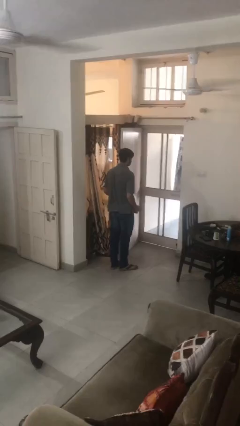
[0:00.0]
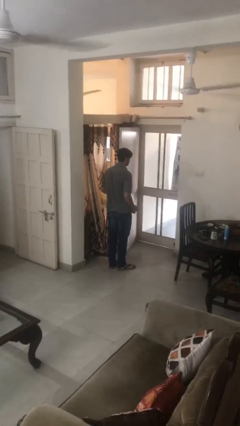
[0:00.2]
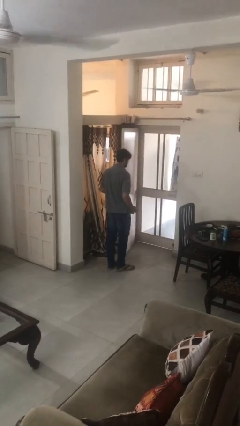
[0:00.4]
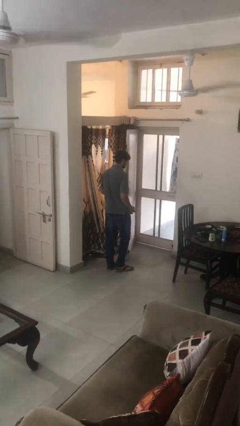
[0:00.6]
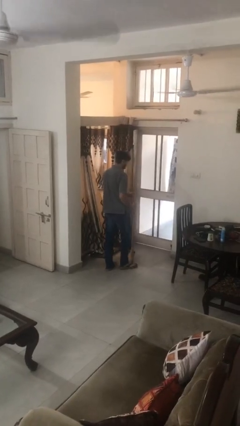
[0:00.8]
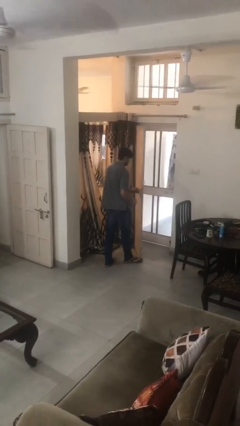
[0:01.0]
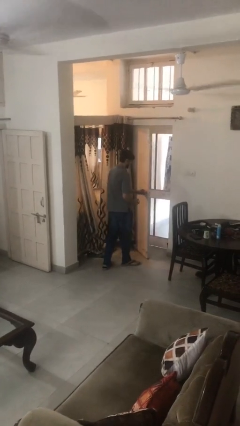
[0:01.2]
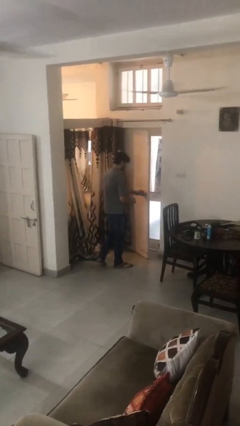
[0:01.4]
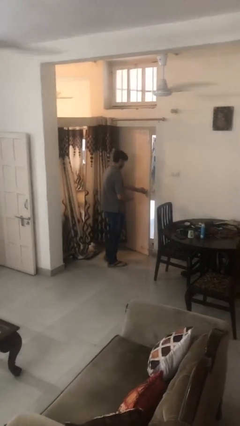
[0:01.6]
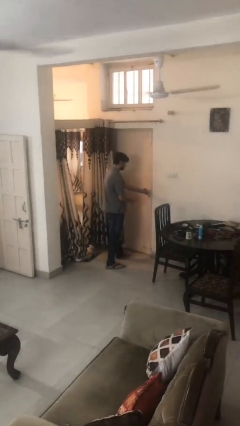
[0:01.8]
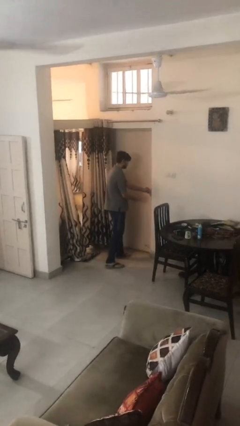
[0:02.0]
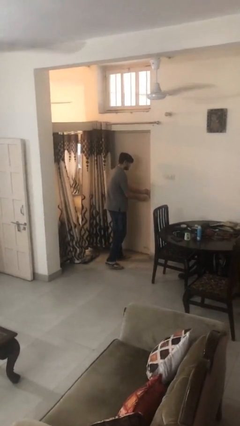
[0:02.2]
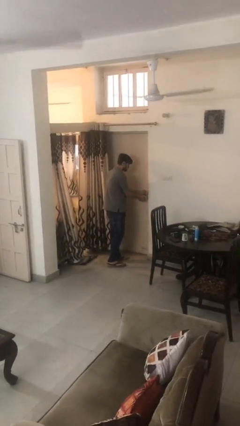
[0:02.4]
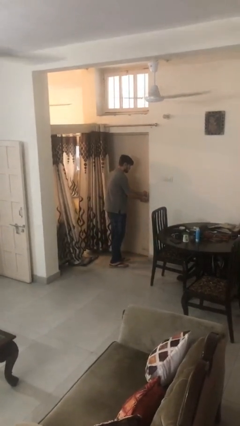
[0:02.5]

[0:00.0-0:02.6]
person closes facility door

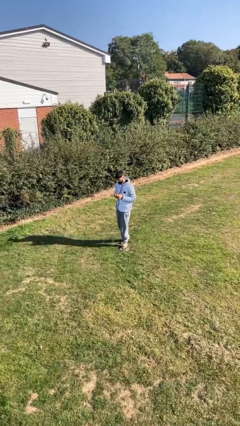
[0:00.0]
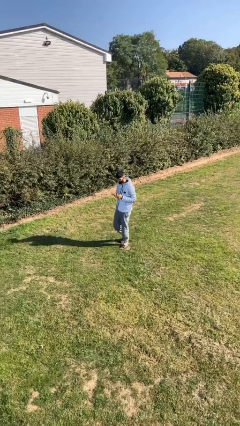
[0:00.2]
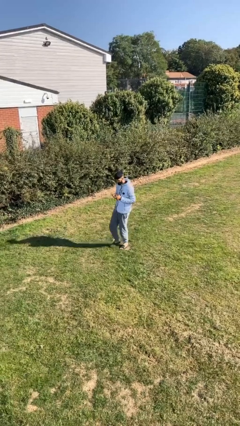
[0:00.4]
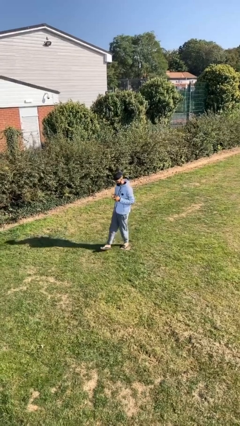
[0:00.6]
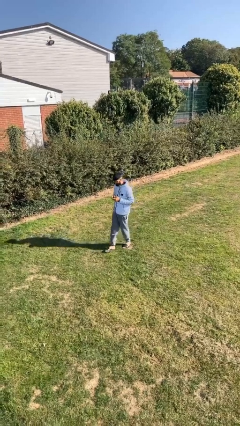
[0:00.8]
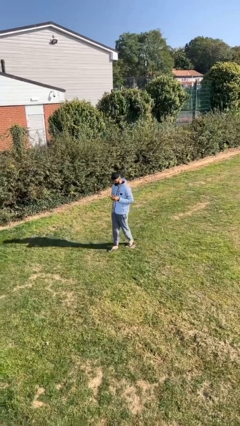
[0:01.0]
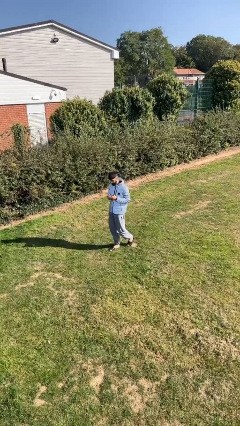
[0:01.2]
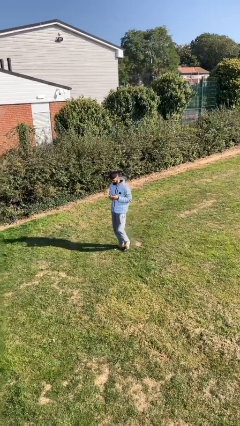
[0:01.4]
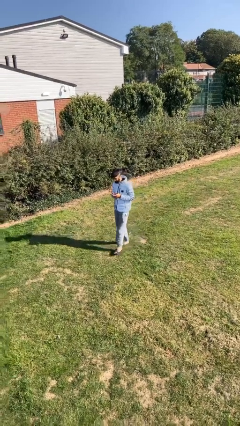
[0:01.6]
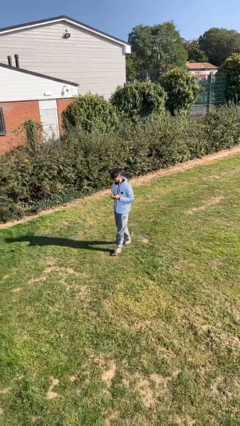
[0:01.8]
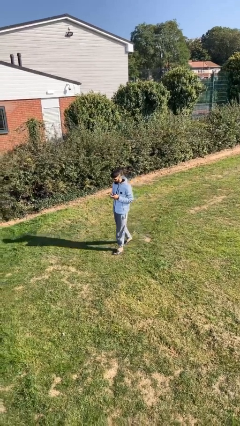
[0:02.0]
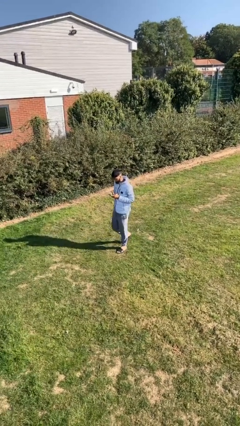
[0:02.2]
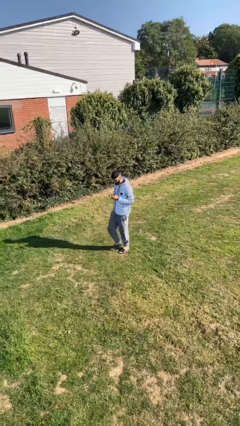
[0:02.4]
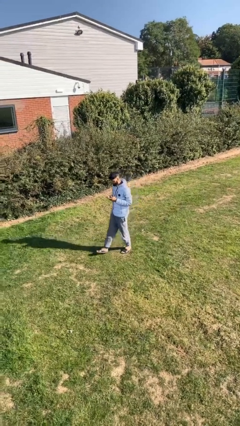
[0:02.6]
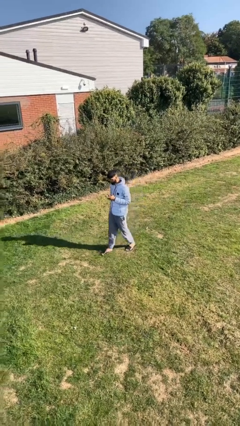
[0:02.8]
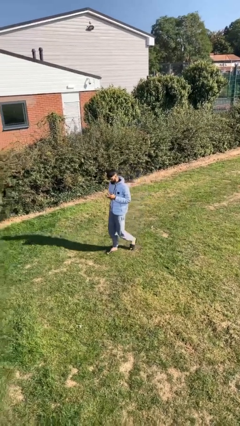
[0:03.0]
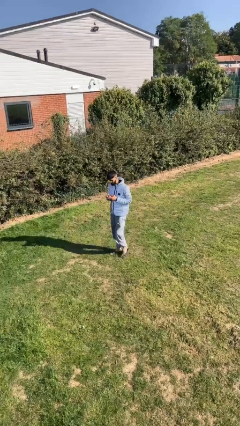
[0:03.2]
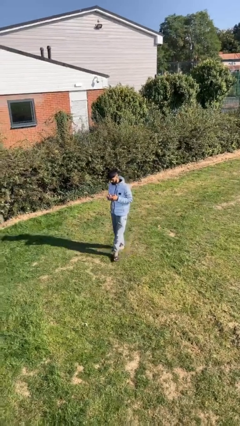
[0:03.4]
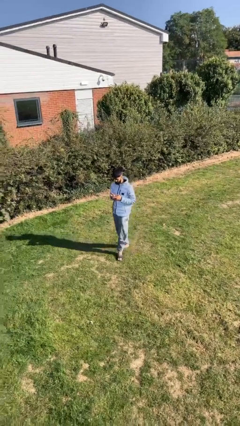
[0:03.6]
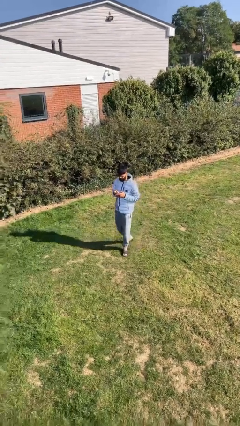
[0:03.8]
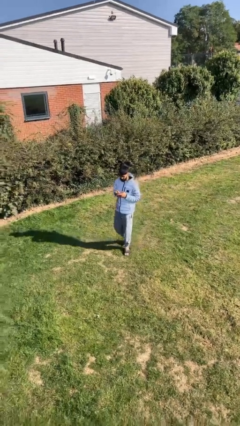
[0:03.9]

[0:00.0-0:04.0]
person texts on phone

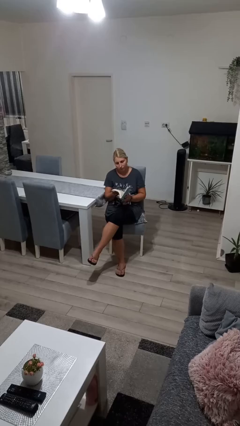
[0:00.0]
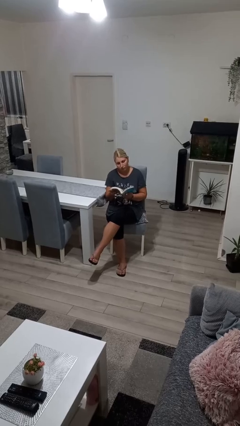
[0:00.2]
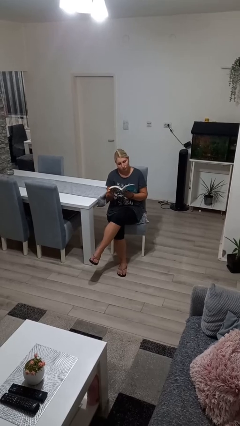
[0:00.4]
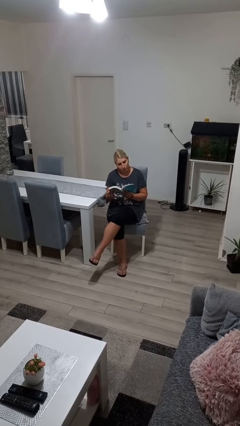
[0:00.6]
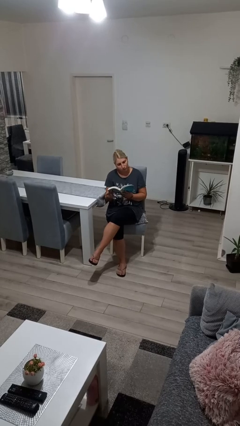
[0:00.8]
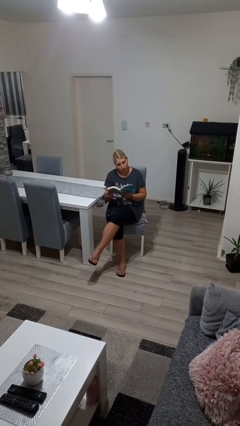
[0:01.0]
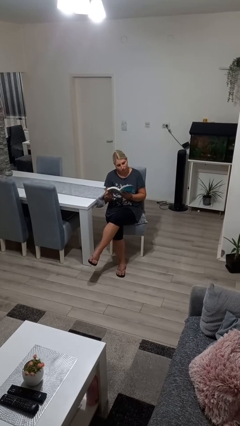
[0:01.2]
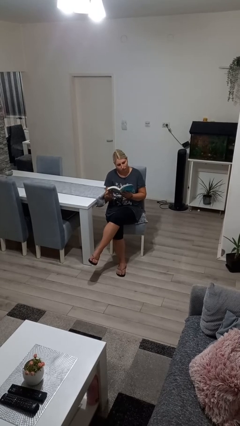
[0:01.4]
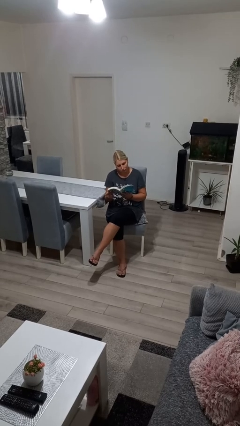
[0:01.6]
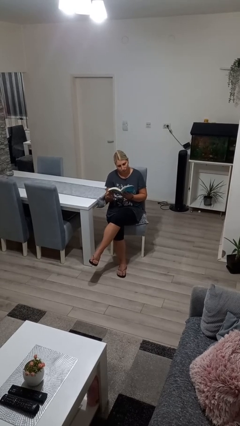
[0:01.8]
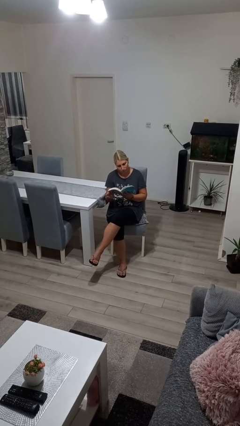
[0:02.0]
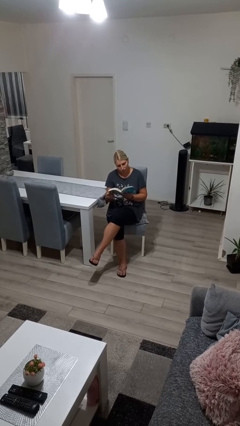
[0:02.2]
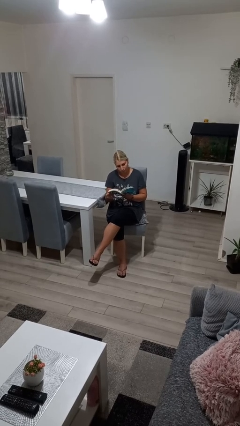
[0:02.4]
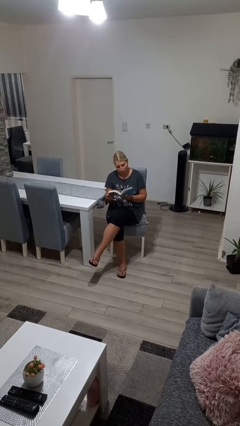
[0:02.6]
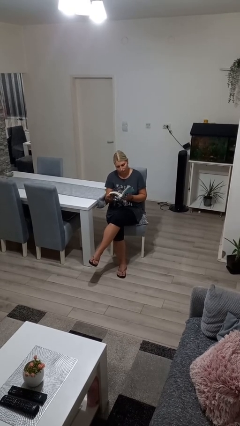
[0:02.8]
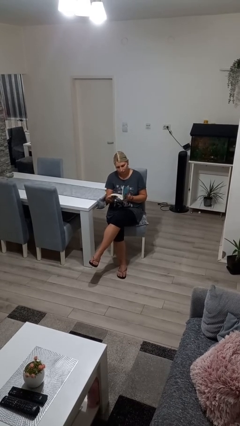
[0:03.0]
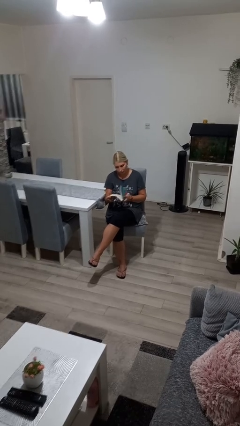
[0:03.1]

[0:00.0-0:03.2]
person reads book

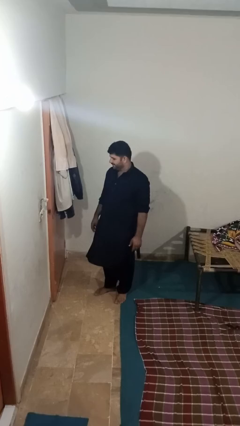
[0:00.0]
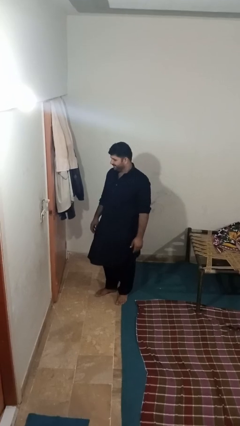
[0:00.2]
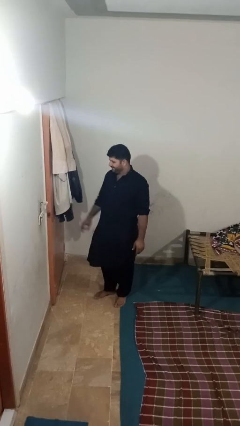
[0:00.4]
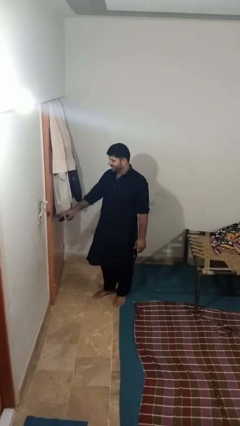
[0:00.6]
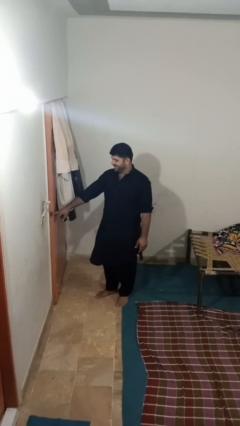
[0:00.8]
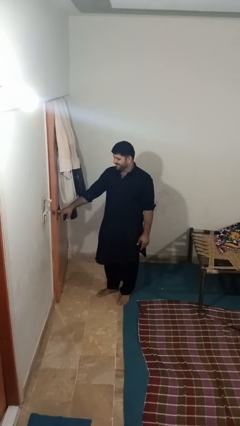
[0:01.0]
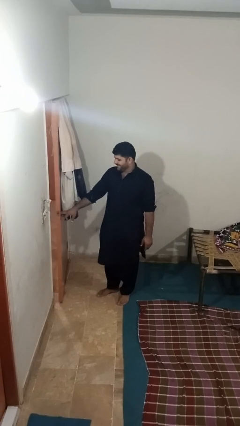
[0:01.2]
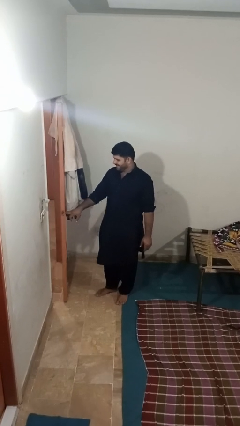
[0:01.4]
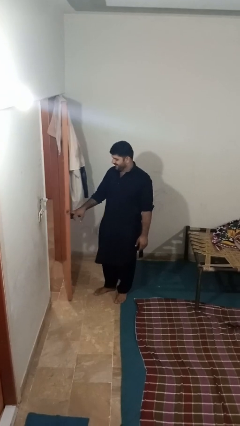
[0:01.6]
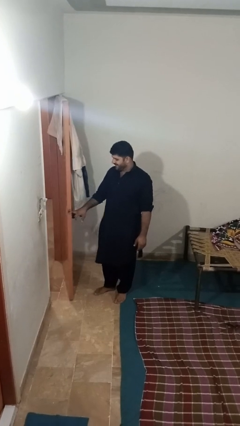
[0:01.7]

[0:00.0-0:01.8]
person opens facility door

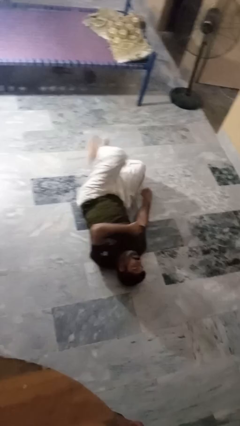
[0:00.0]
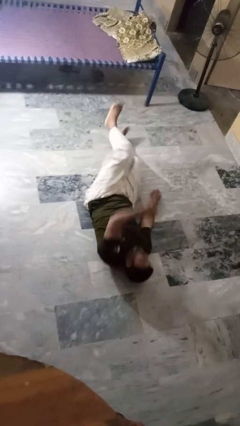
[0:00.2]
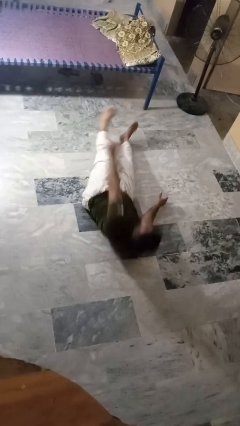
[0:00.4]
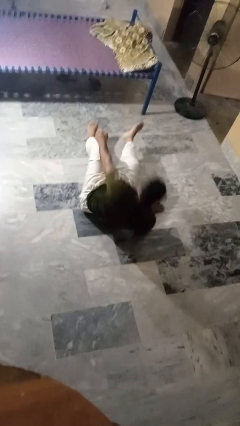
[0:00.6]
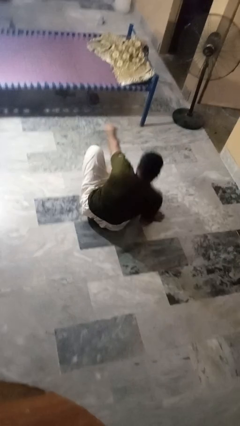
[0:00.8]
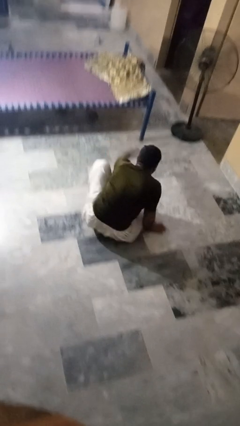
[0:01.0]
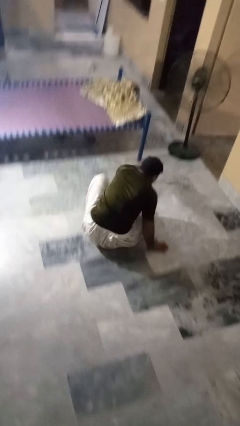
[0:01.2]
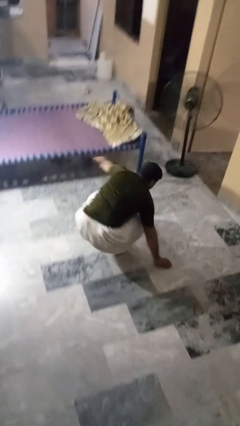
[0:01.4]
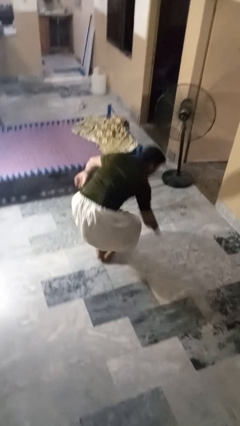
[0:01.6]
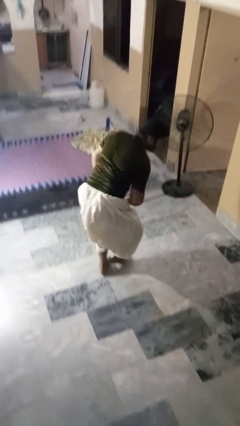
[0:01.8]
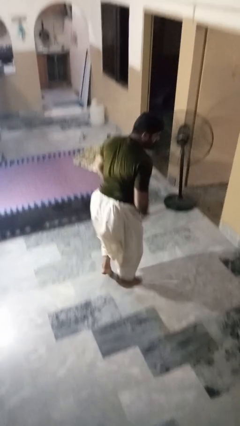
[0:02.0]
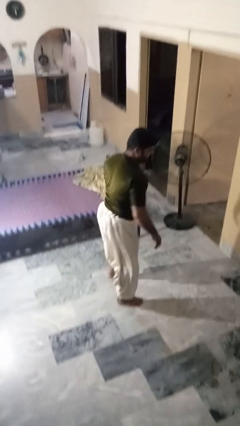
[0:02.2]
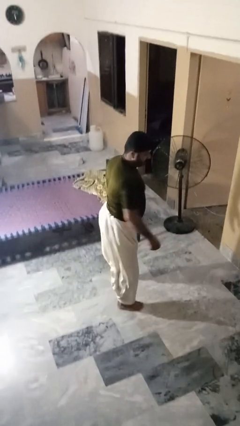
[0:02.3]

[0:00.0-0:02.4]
person stands up from floor

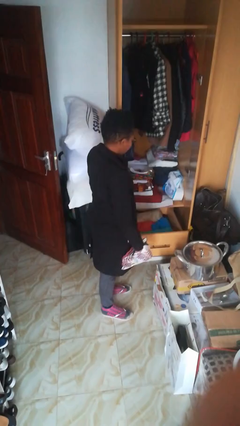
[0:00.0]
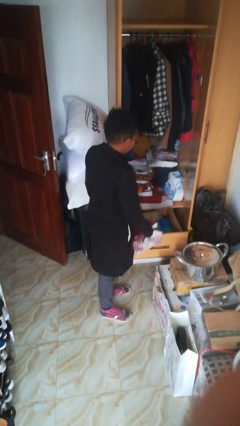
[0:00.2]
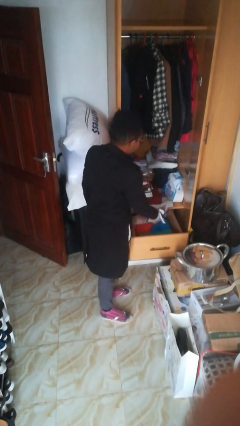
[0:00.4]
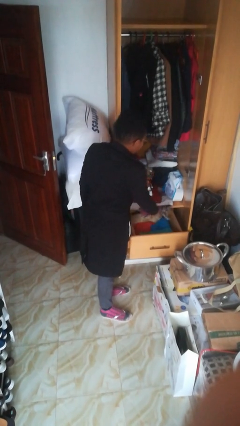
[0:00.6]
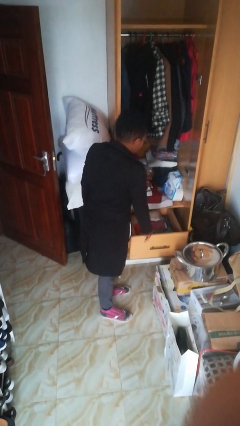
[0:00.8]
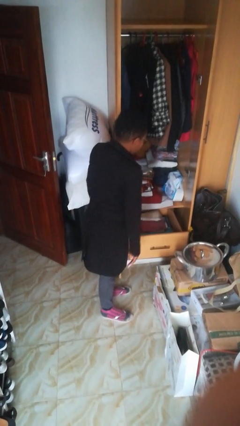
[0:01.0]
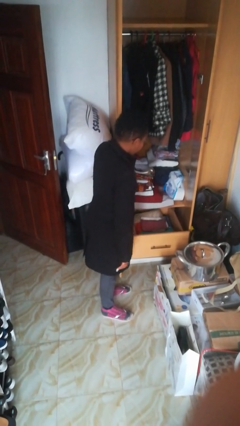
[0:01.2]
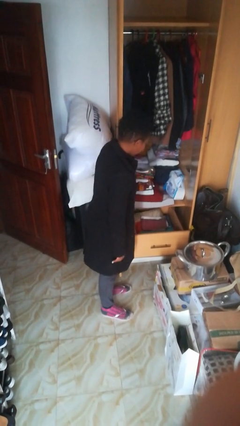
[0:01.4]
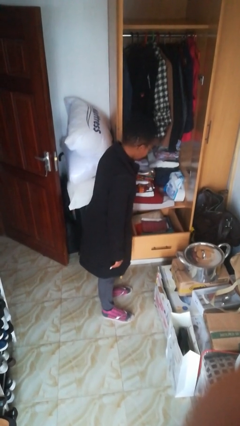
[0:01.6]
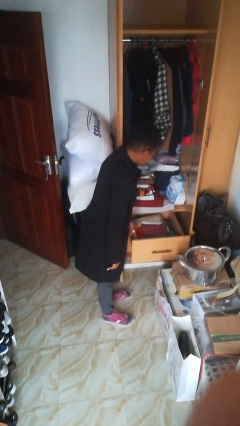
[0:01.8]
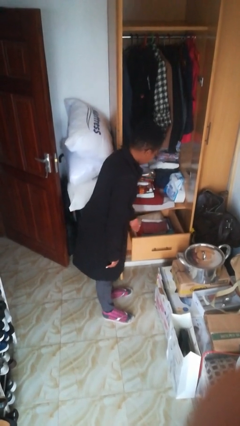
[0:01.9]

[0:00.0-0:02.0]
person puts clothes into dresser

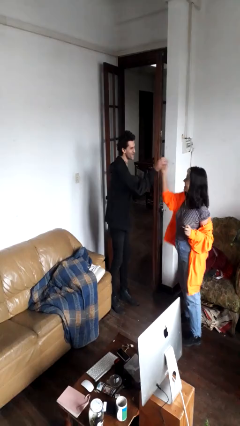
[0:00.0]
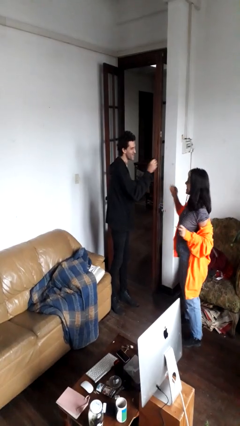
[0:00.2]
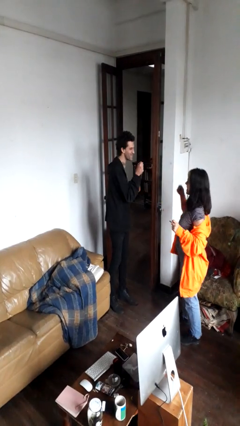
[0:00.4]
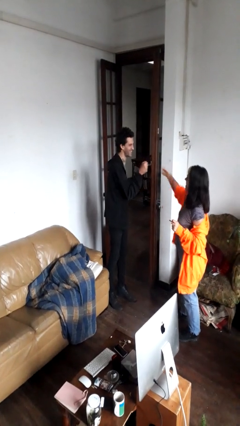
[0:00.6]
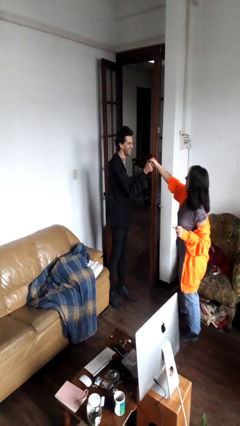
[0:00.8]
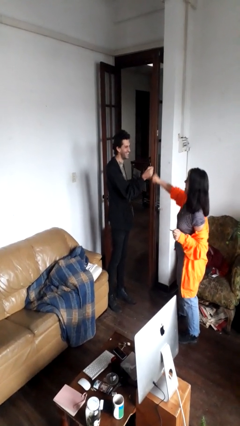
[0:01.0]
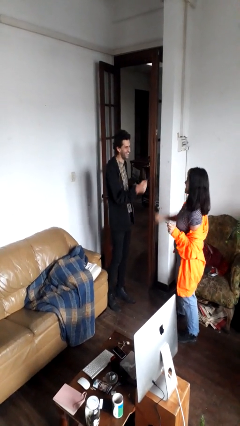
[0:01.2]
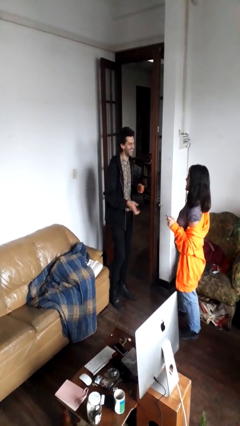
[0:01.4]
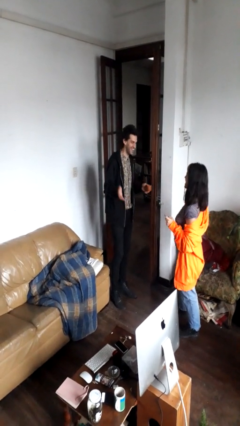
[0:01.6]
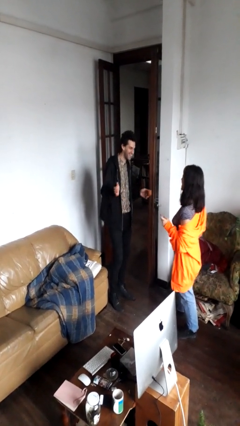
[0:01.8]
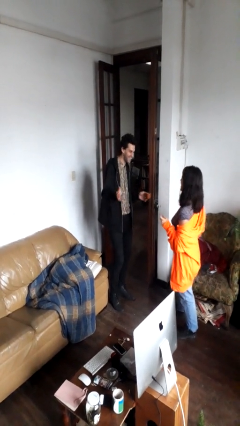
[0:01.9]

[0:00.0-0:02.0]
person highfives hand
